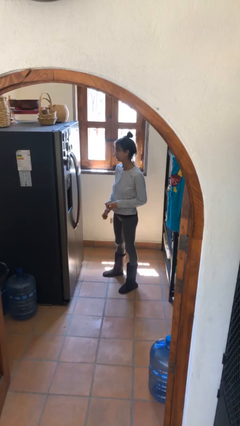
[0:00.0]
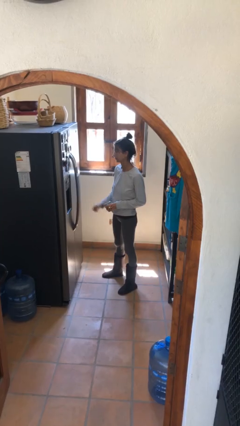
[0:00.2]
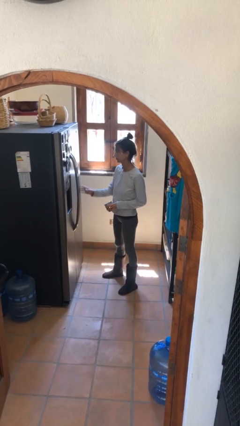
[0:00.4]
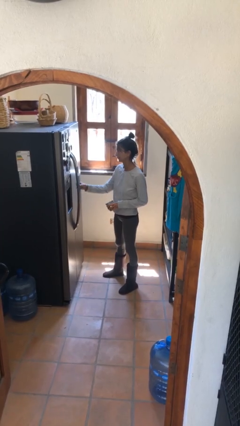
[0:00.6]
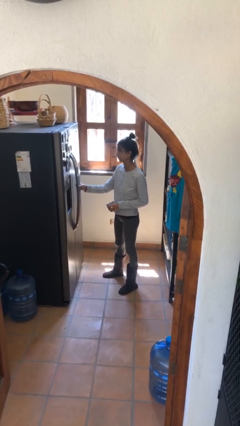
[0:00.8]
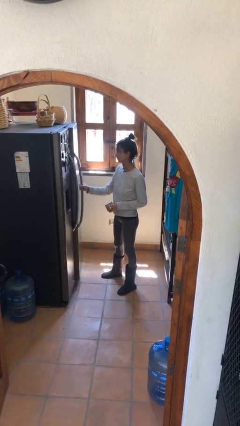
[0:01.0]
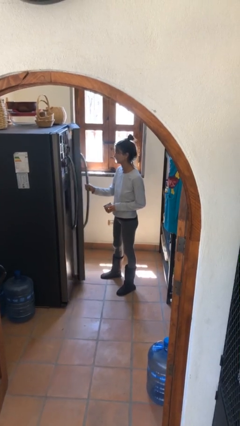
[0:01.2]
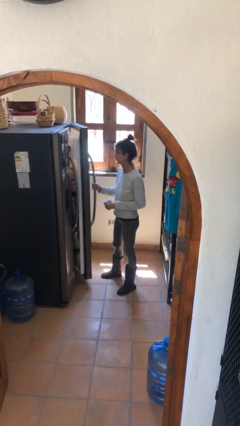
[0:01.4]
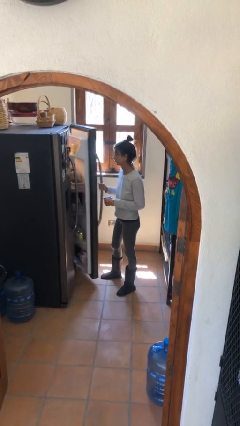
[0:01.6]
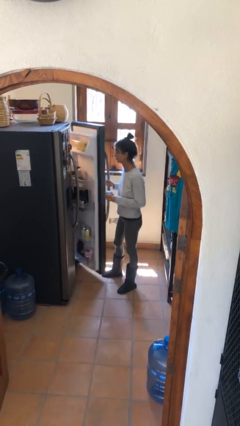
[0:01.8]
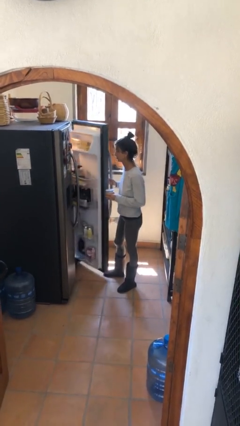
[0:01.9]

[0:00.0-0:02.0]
person opens refrigerator

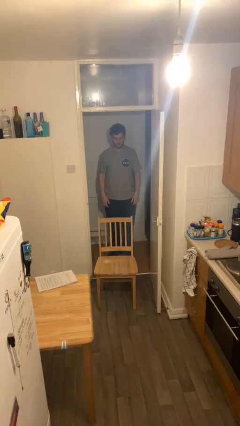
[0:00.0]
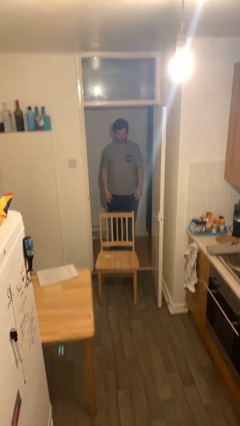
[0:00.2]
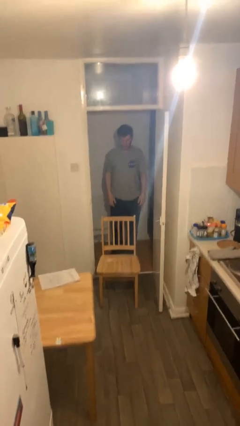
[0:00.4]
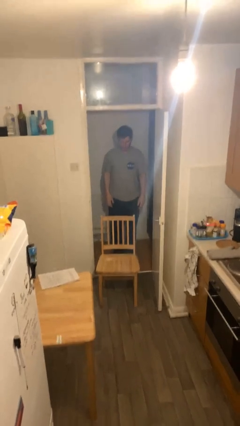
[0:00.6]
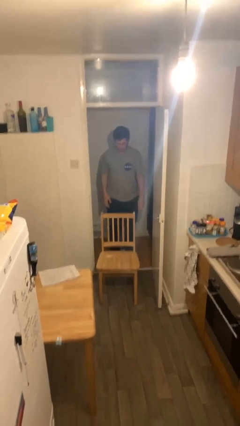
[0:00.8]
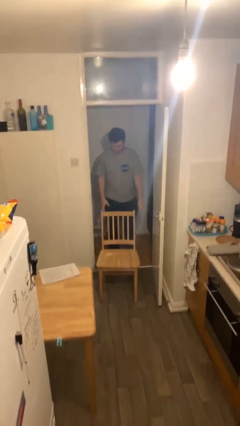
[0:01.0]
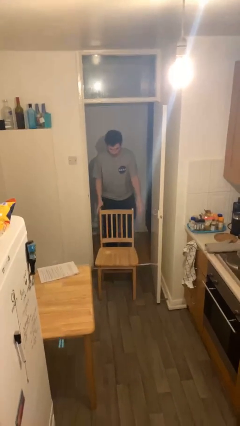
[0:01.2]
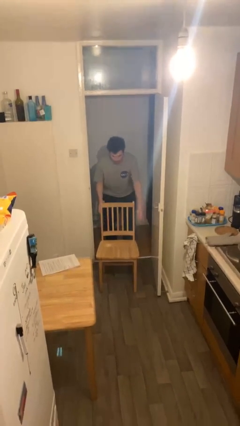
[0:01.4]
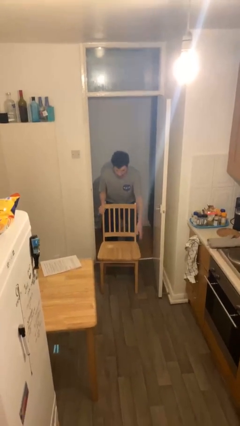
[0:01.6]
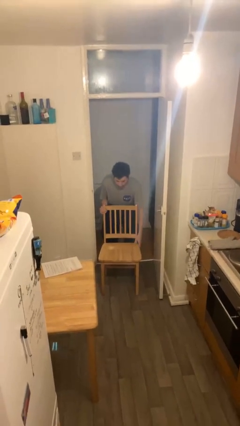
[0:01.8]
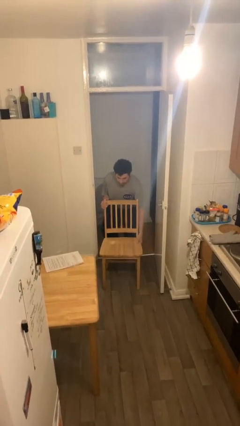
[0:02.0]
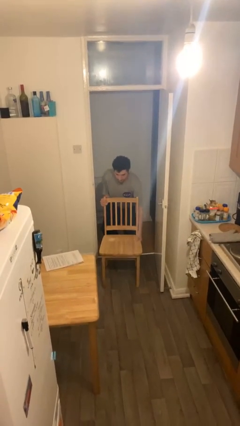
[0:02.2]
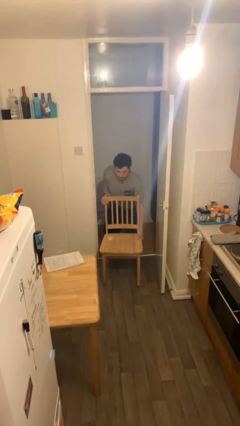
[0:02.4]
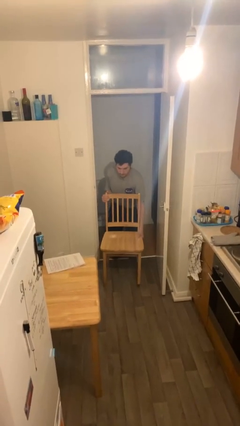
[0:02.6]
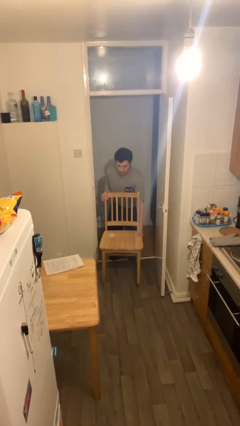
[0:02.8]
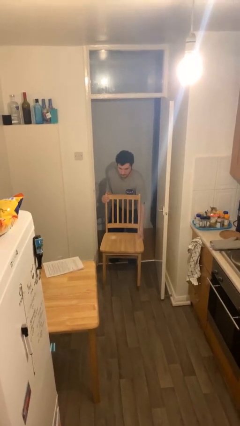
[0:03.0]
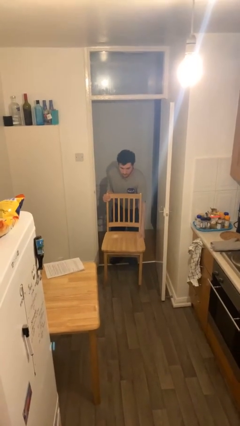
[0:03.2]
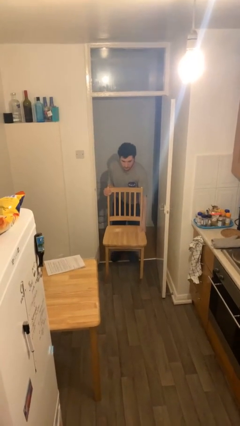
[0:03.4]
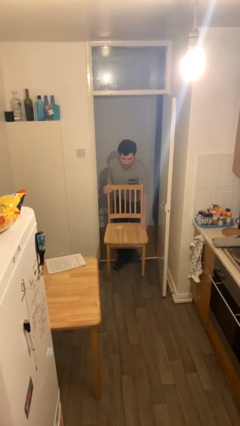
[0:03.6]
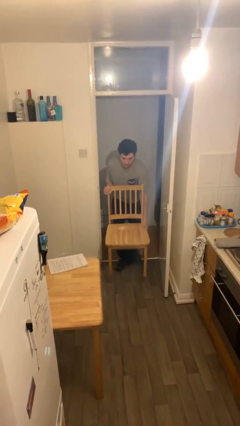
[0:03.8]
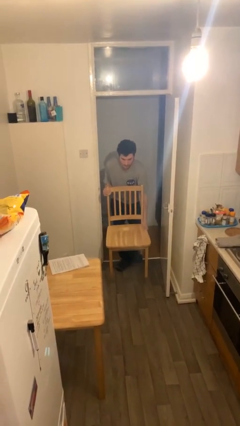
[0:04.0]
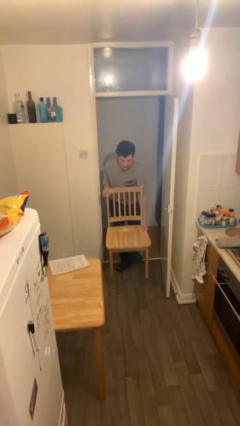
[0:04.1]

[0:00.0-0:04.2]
person picks up object from floor

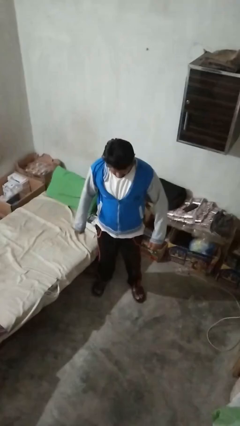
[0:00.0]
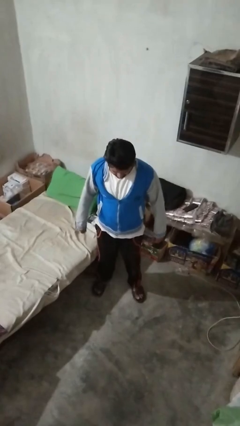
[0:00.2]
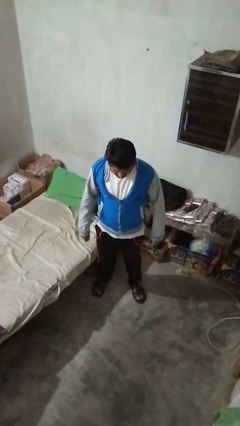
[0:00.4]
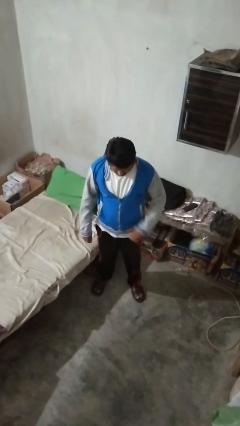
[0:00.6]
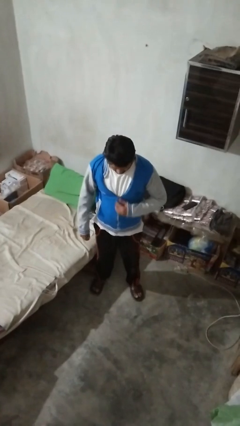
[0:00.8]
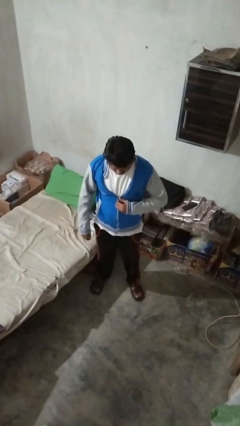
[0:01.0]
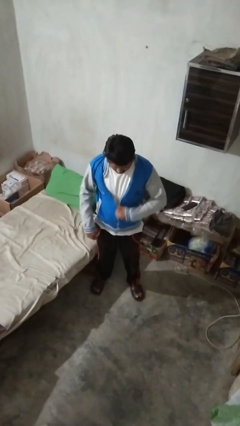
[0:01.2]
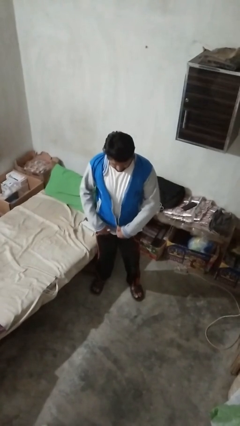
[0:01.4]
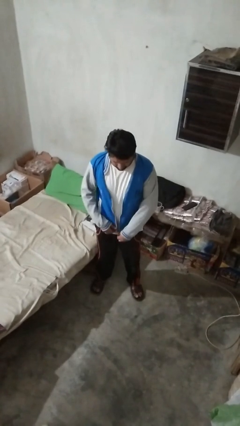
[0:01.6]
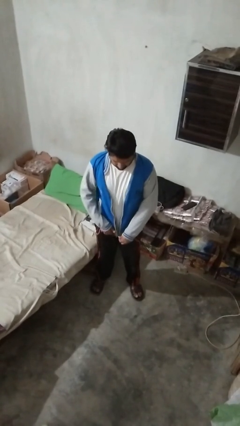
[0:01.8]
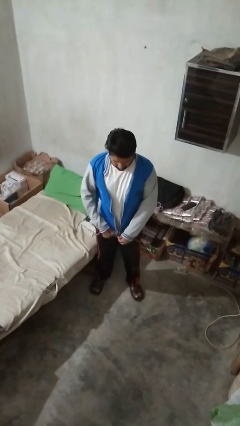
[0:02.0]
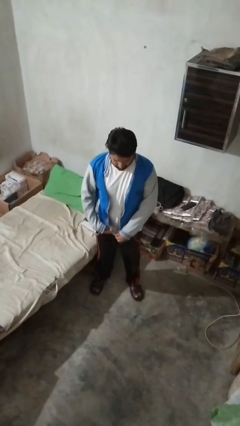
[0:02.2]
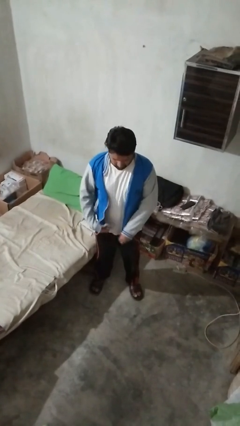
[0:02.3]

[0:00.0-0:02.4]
person unzips jacket

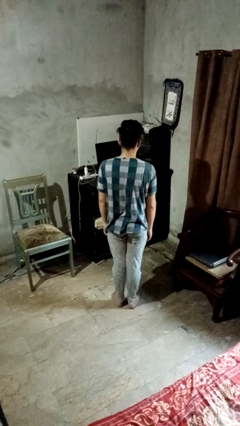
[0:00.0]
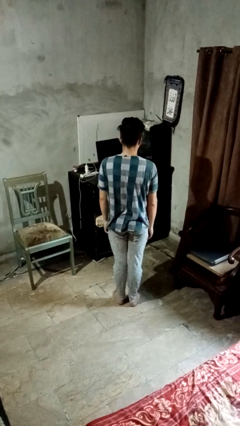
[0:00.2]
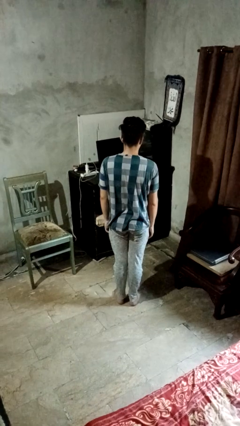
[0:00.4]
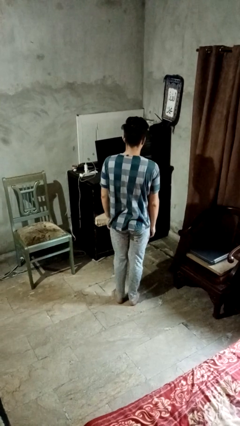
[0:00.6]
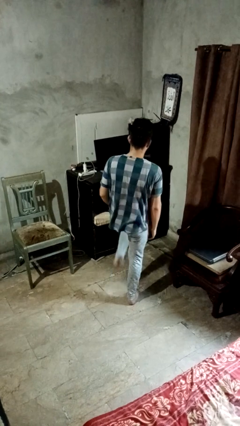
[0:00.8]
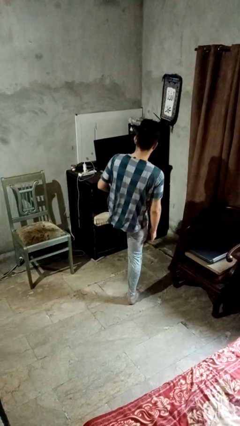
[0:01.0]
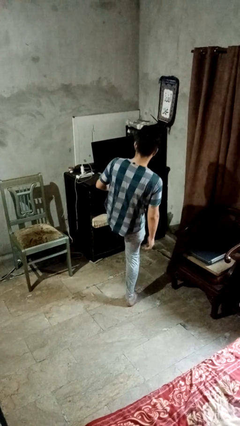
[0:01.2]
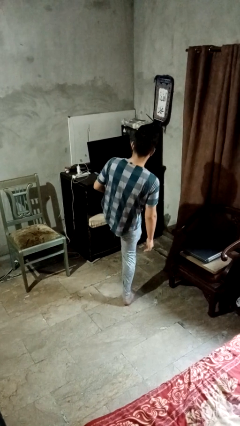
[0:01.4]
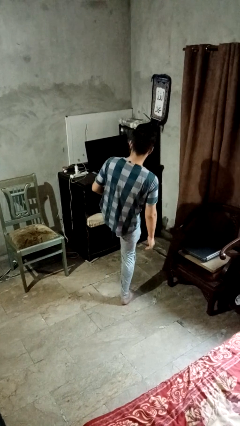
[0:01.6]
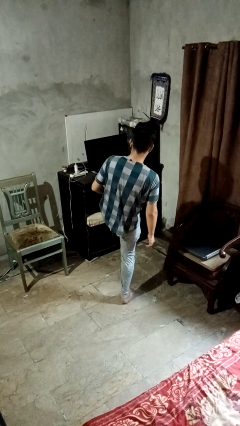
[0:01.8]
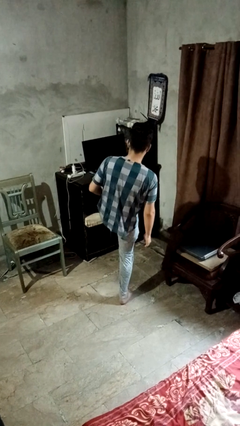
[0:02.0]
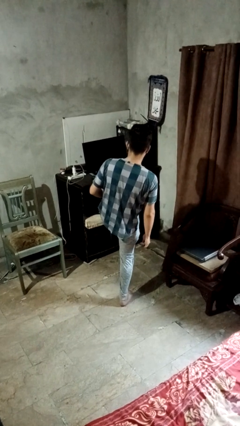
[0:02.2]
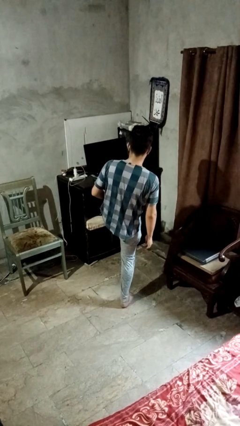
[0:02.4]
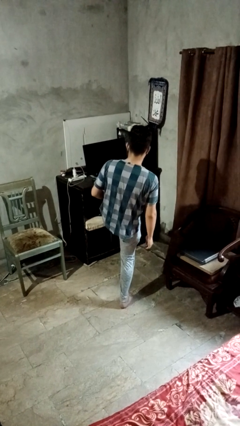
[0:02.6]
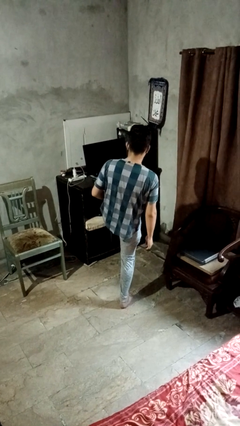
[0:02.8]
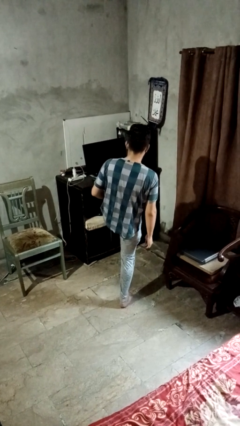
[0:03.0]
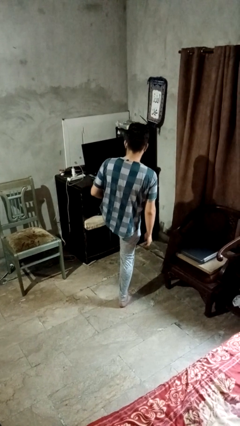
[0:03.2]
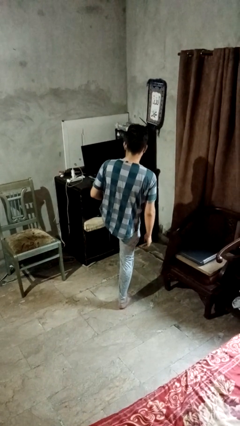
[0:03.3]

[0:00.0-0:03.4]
person karate kicks

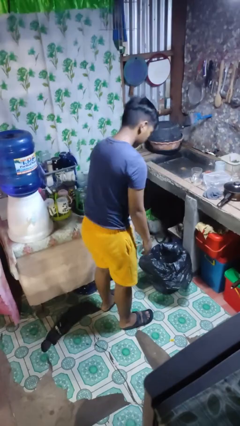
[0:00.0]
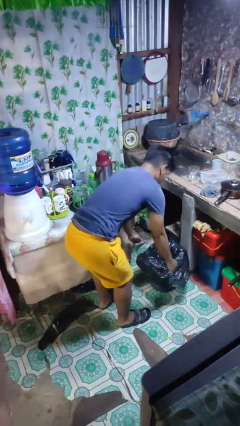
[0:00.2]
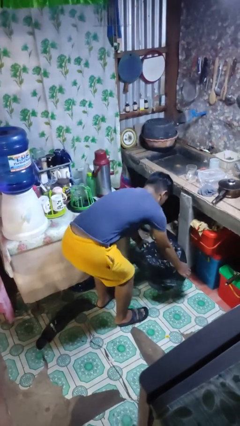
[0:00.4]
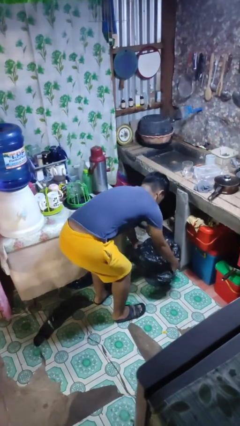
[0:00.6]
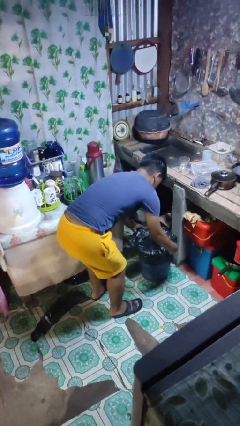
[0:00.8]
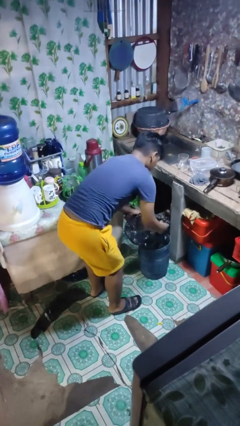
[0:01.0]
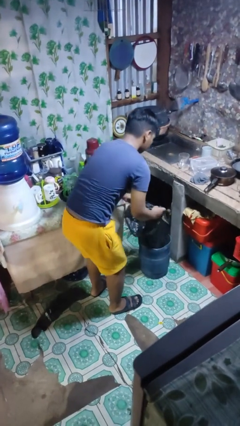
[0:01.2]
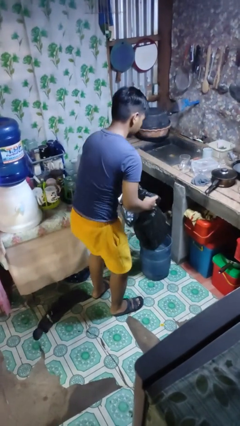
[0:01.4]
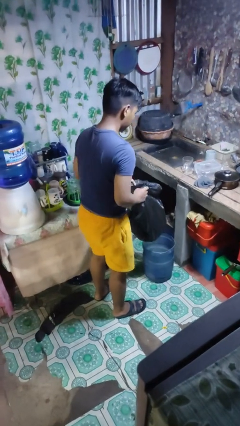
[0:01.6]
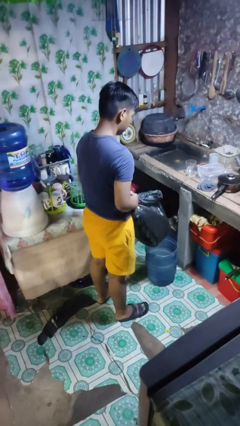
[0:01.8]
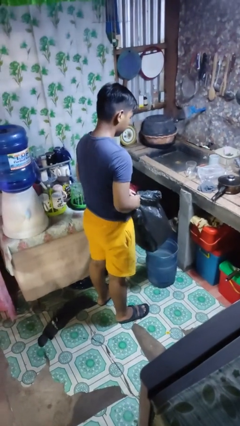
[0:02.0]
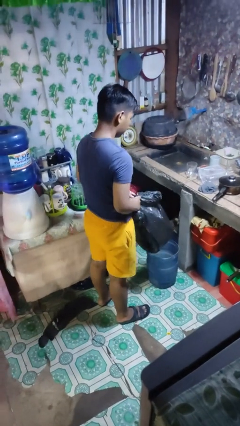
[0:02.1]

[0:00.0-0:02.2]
person removes trashbag from trashcan

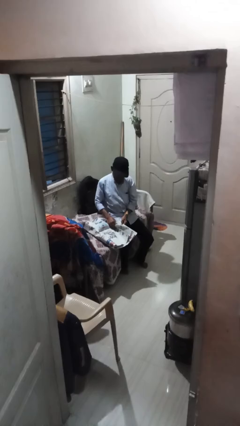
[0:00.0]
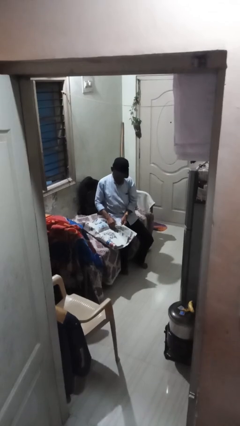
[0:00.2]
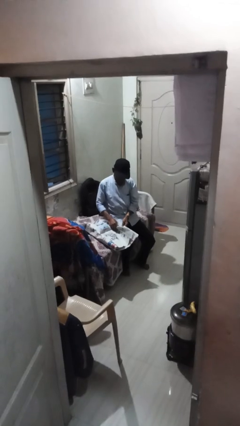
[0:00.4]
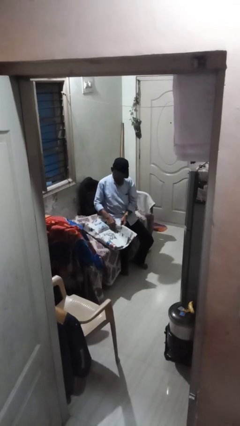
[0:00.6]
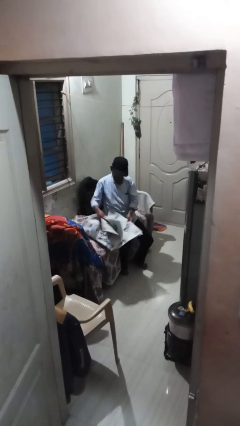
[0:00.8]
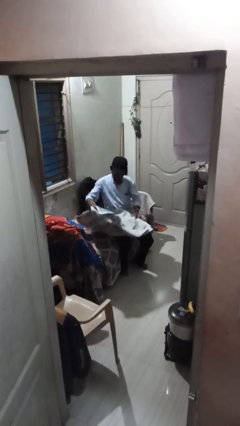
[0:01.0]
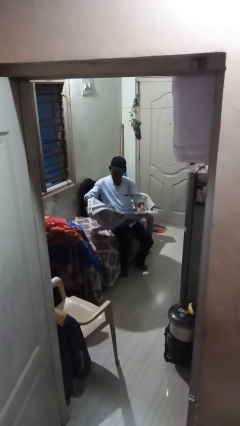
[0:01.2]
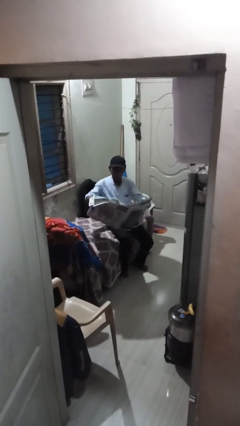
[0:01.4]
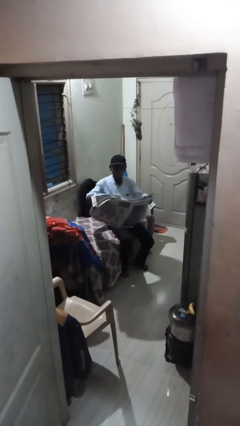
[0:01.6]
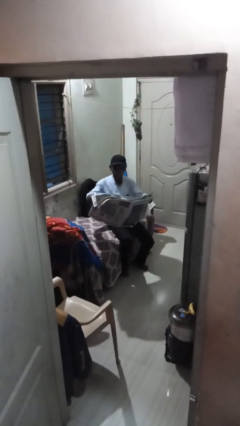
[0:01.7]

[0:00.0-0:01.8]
person reads newspaper

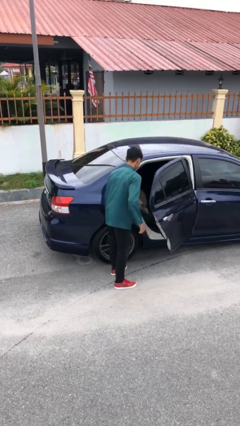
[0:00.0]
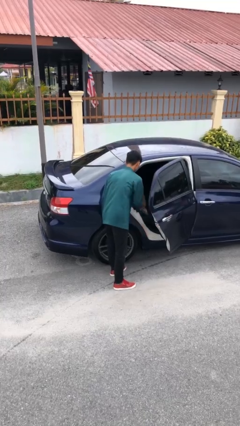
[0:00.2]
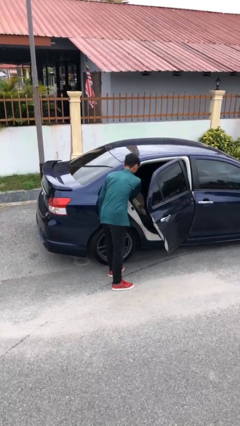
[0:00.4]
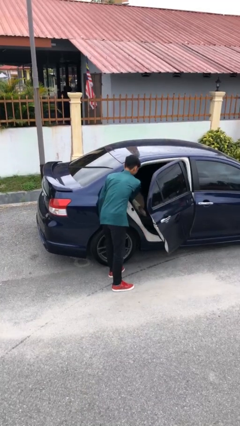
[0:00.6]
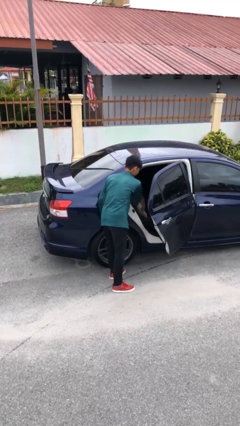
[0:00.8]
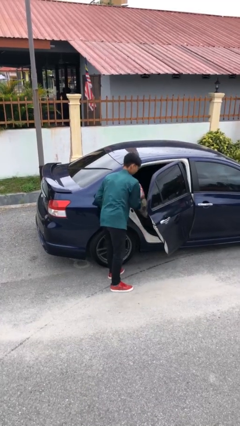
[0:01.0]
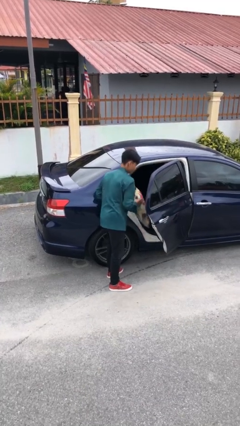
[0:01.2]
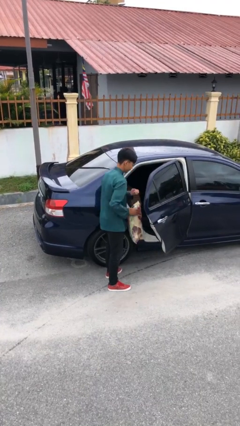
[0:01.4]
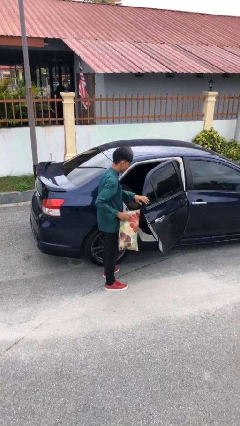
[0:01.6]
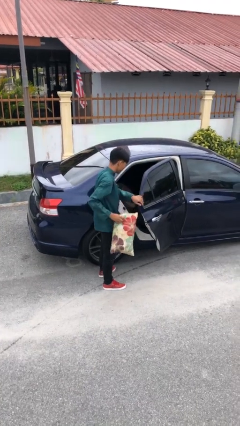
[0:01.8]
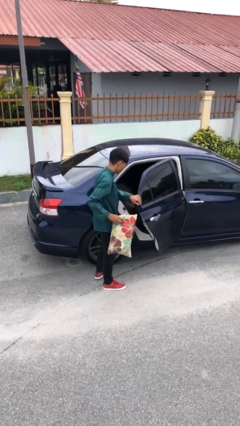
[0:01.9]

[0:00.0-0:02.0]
person unloads car
